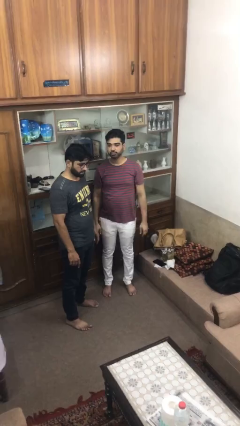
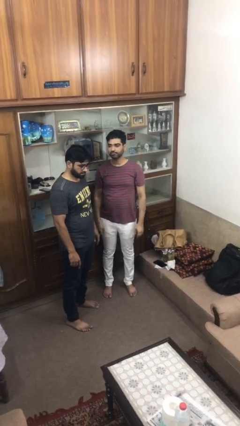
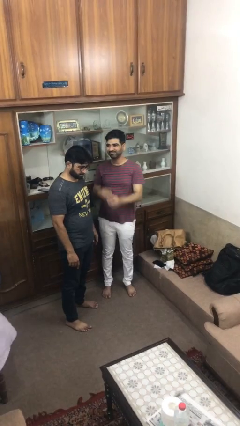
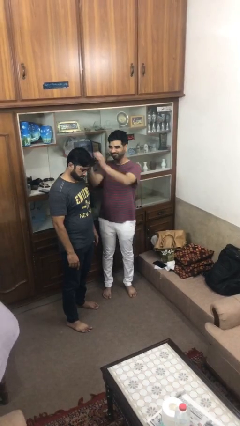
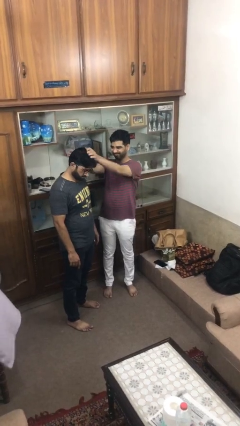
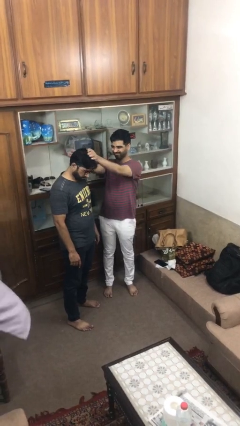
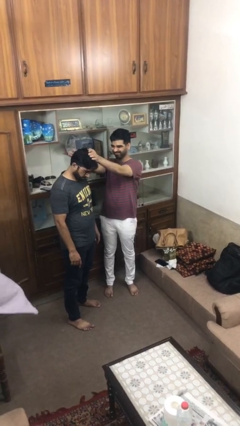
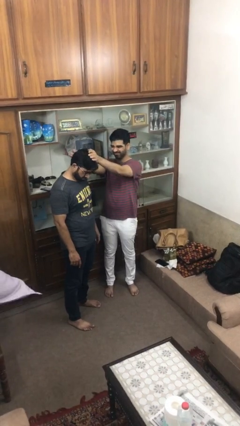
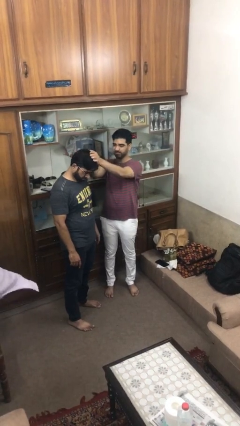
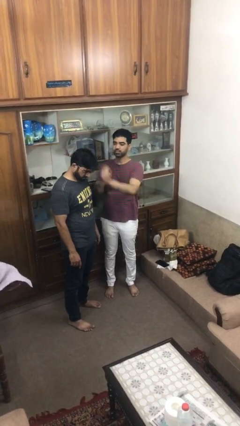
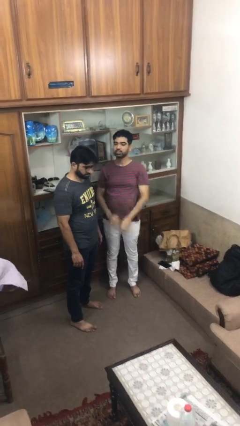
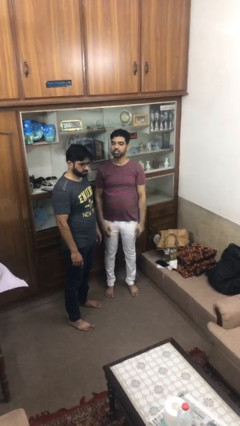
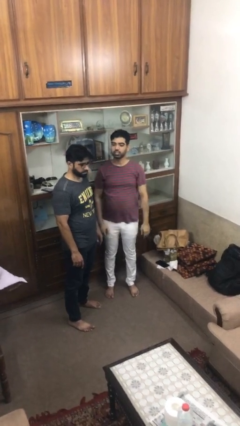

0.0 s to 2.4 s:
person grabs person by hair

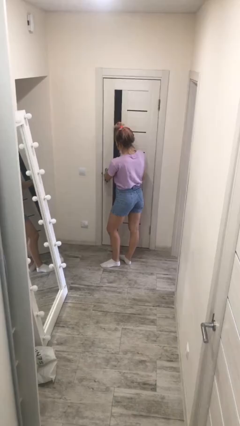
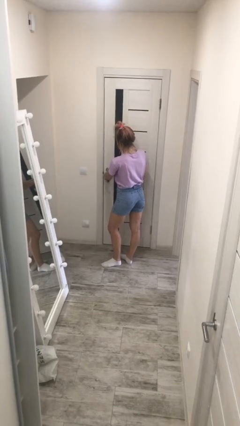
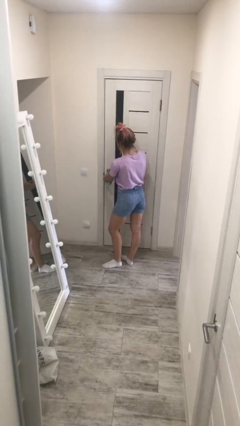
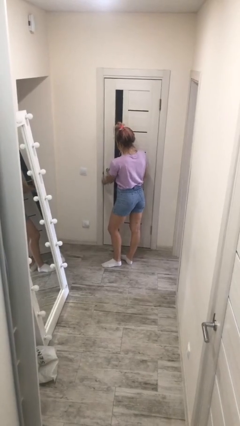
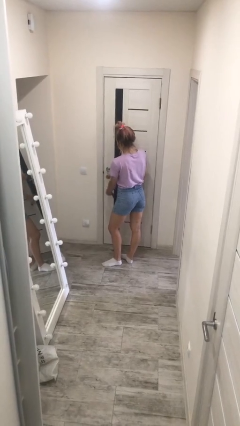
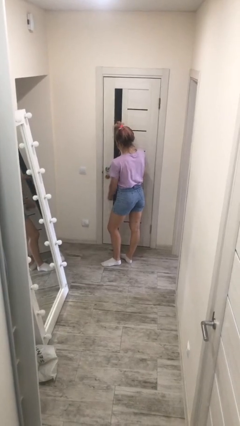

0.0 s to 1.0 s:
person unlocks door with keys

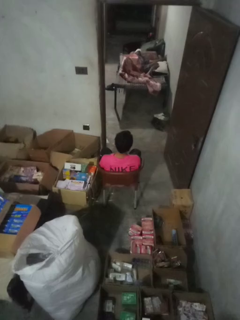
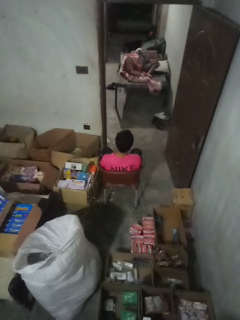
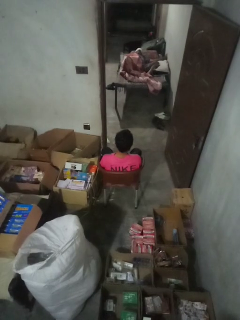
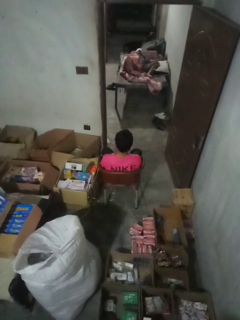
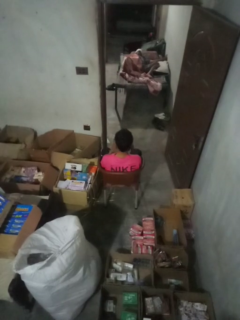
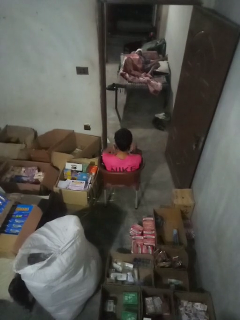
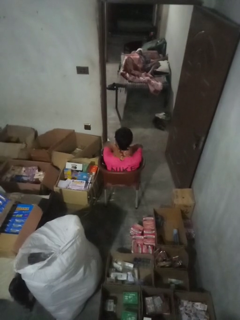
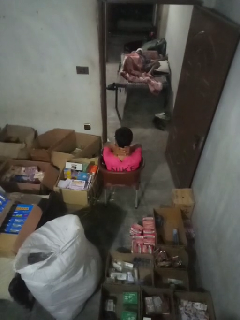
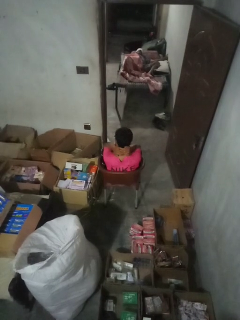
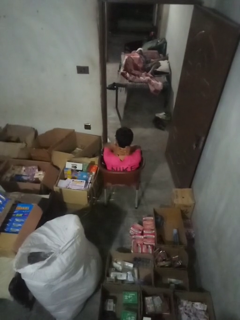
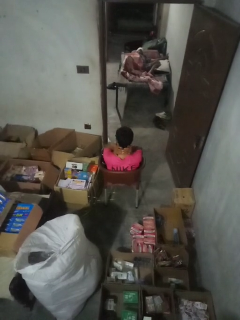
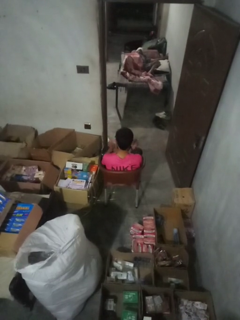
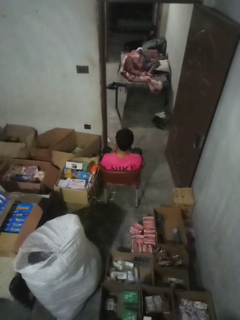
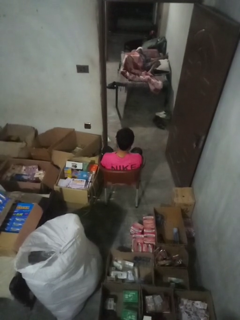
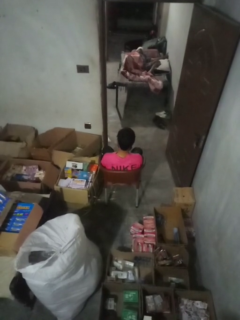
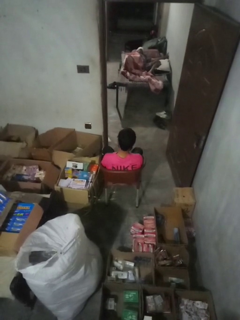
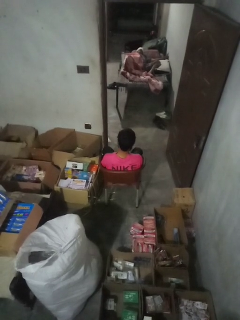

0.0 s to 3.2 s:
person rubs neck

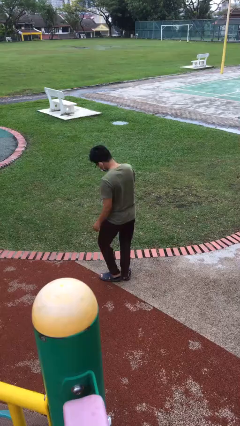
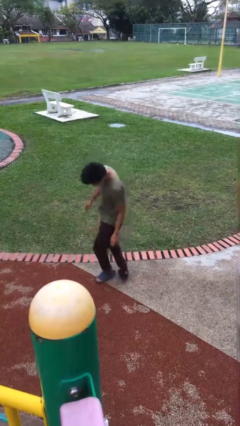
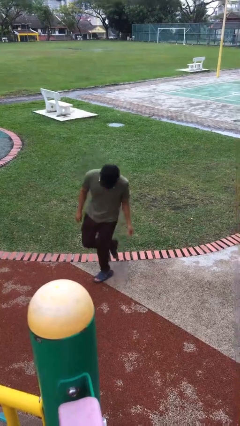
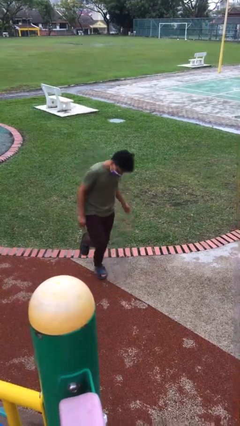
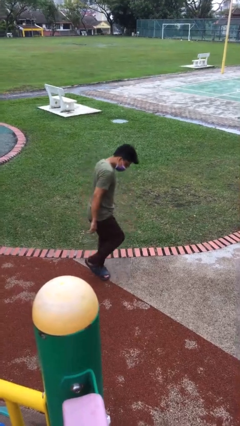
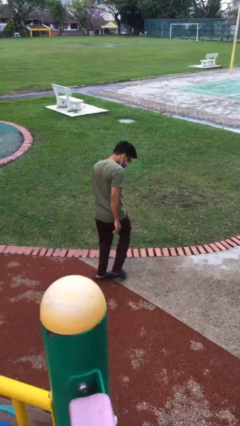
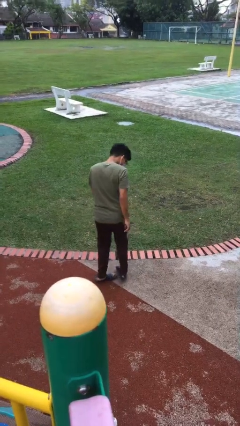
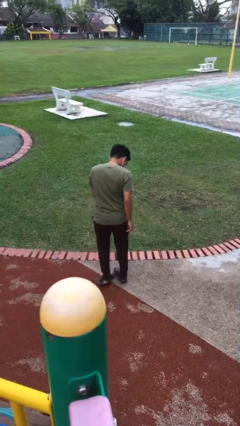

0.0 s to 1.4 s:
person twirls

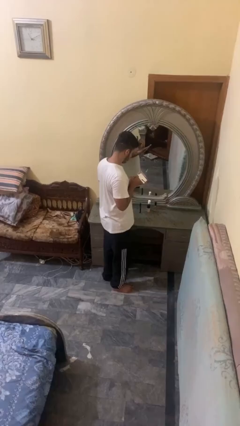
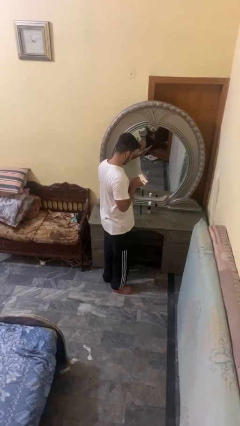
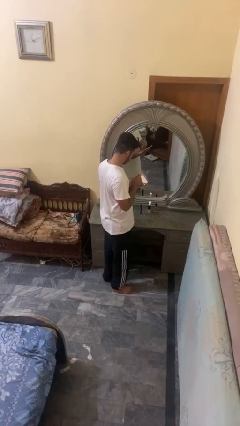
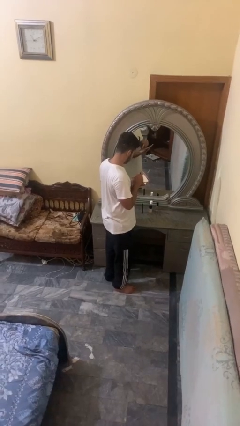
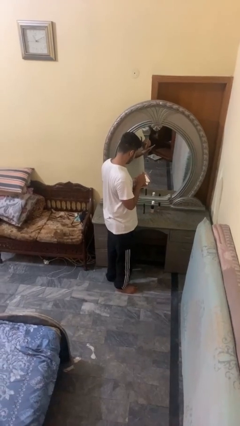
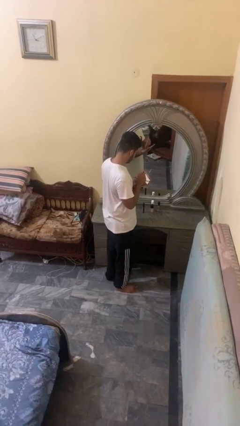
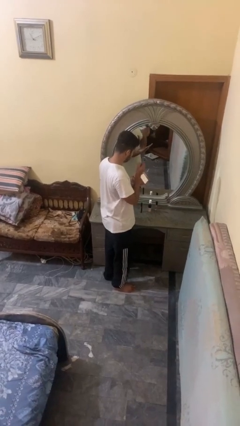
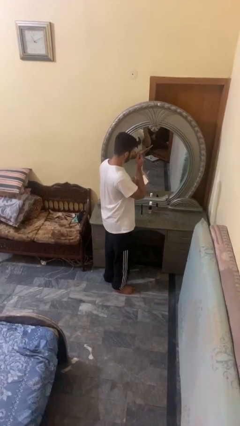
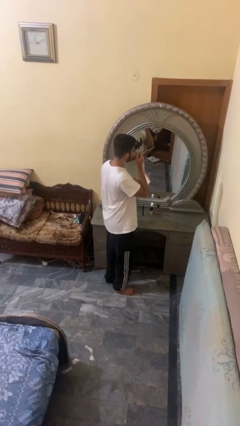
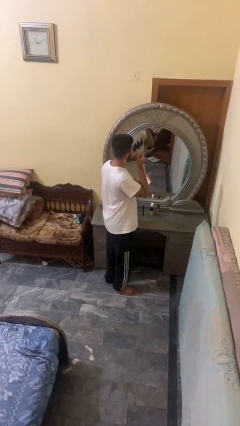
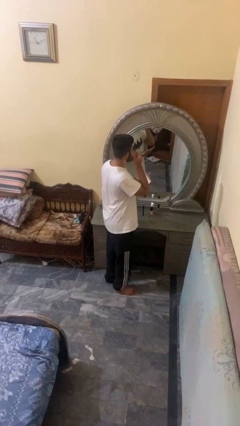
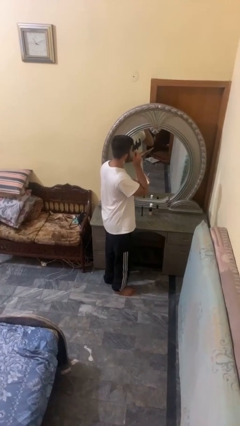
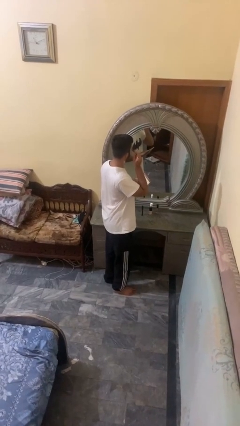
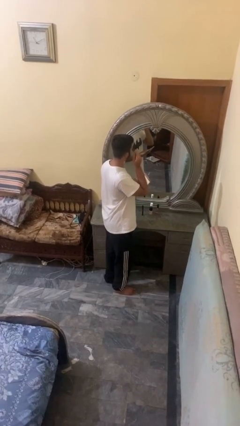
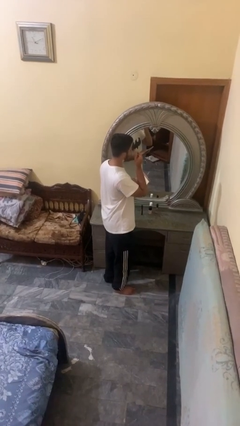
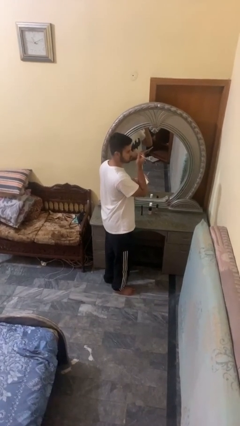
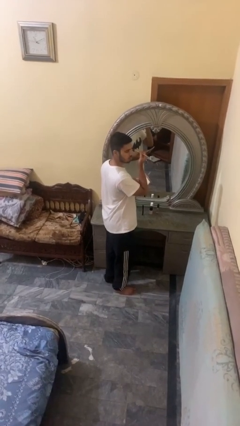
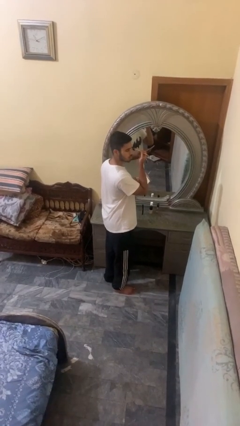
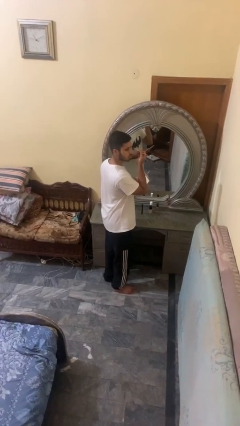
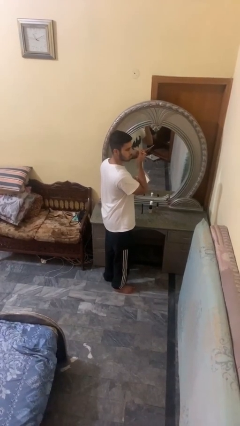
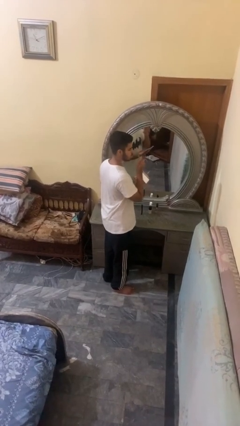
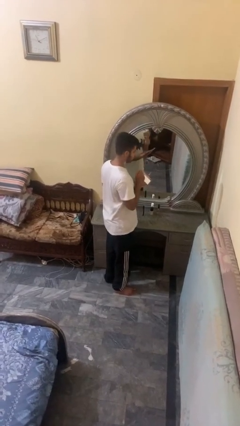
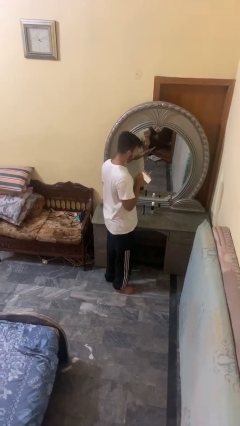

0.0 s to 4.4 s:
person applies eye makeup

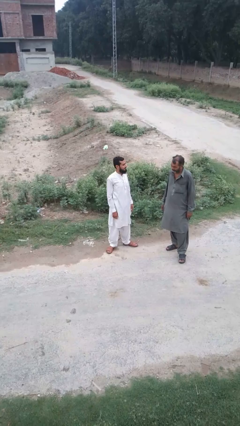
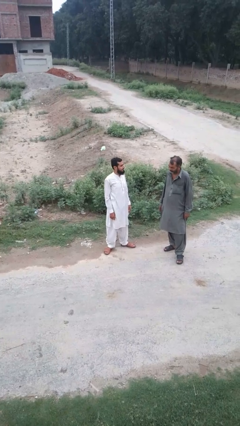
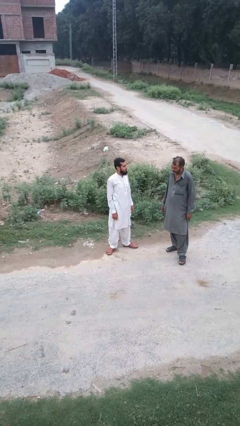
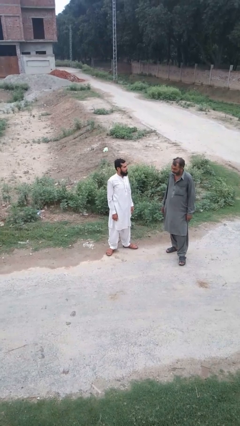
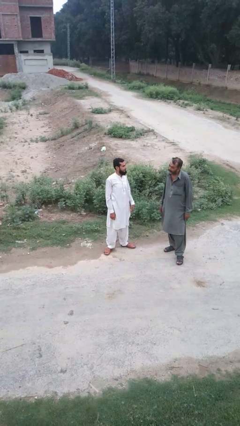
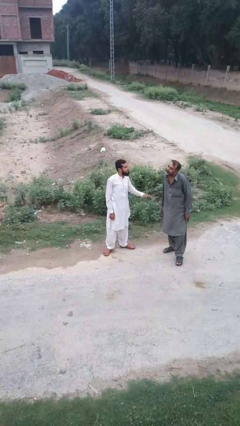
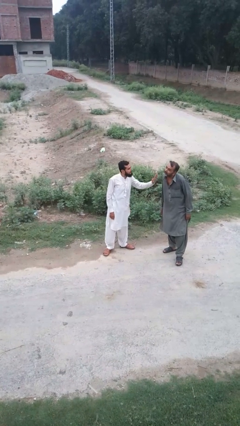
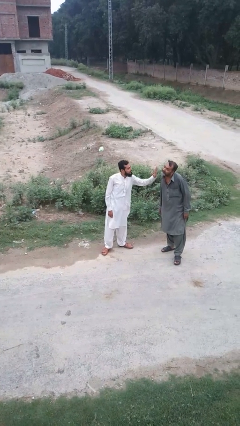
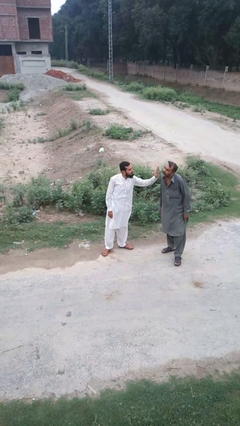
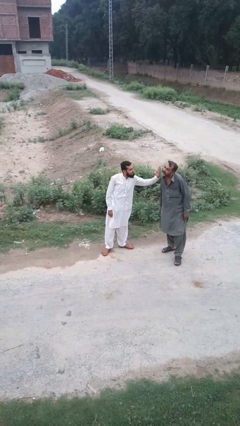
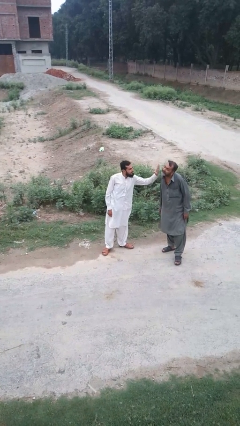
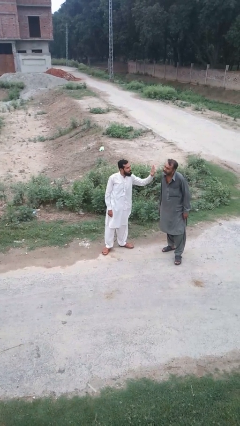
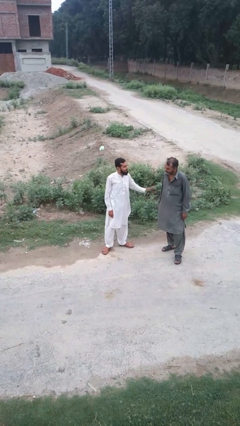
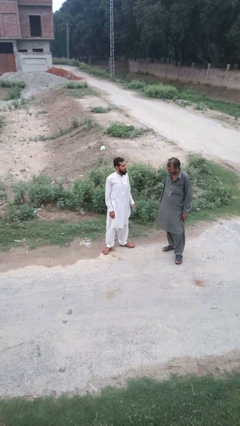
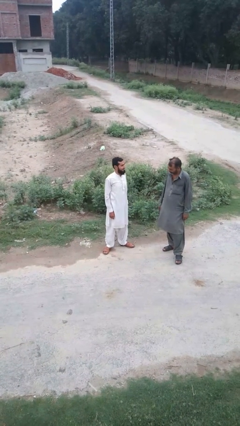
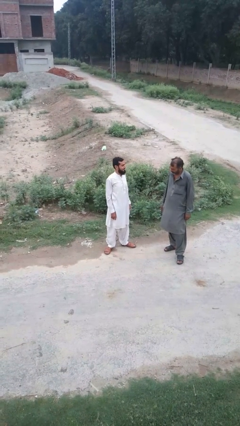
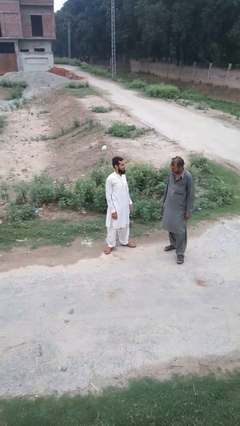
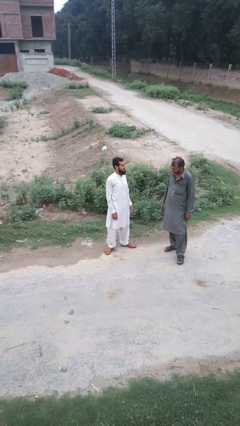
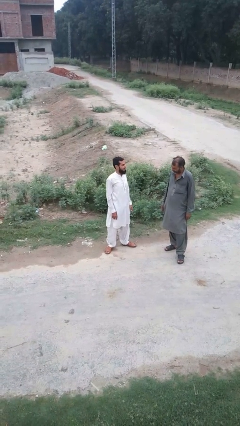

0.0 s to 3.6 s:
person touches face of person

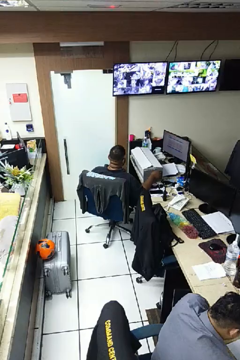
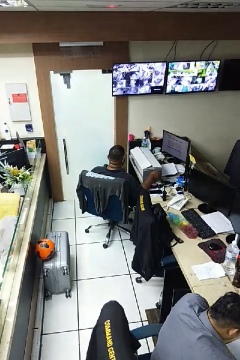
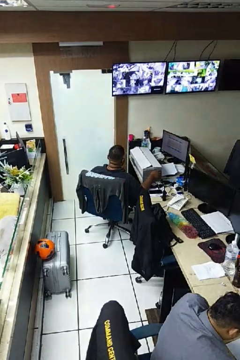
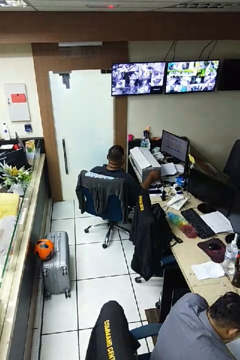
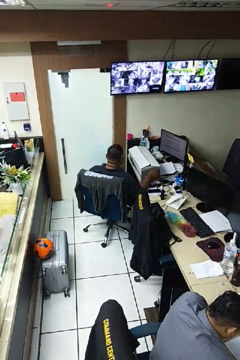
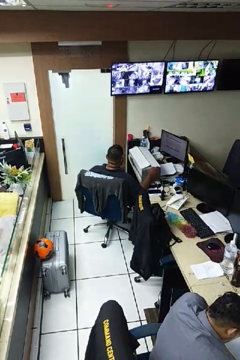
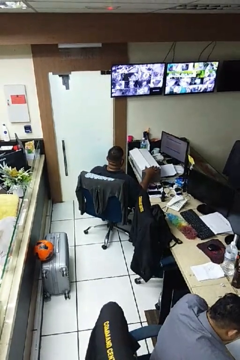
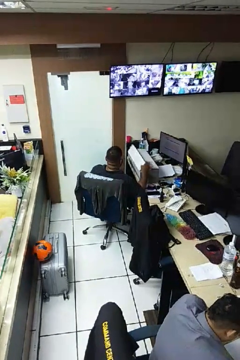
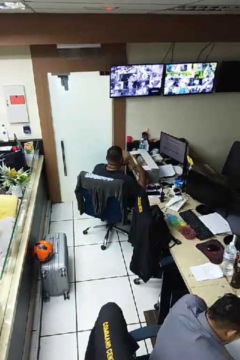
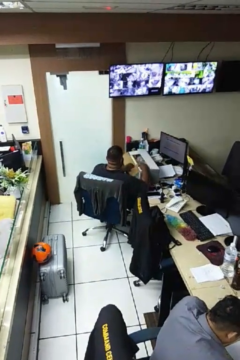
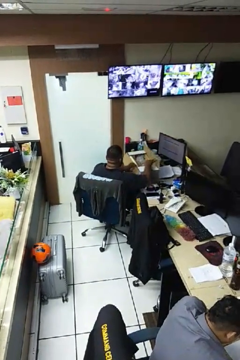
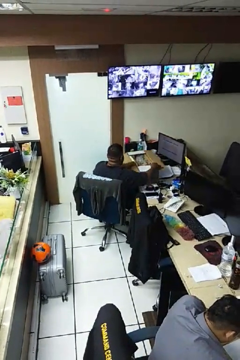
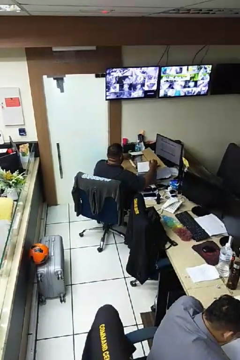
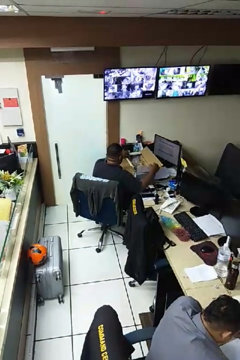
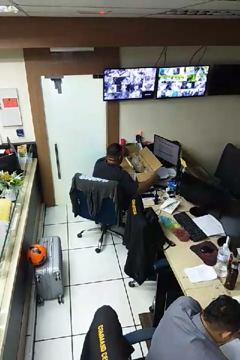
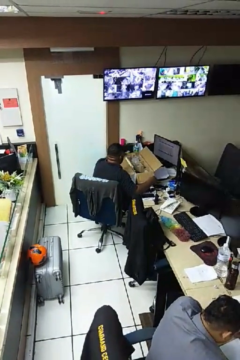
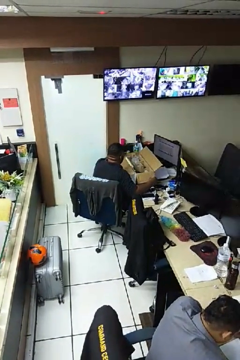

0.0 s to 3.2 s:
person opens box
